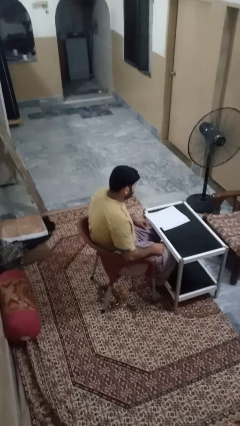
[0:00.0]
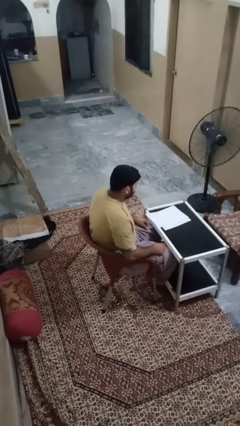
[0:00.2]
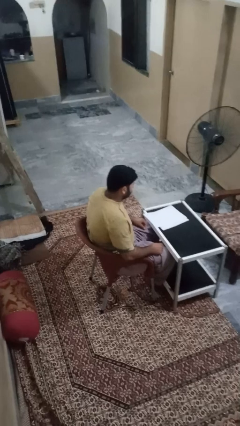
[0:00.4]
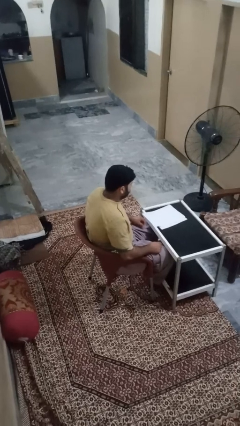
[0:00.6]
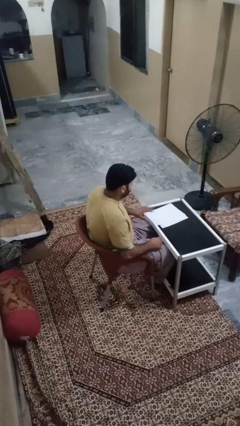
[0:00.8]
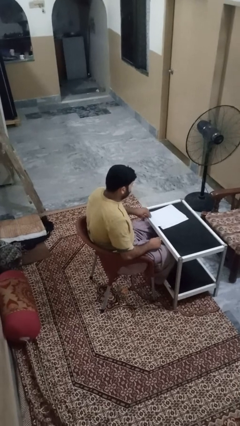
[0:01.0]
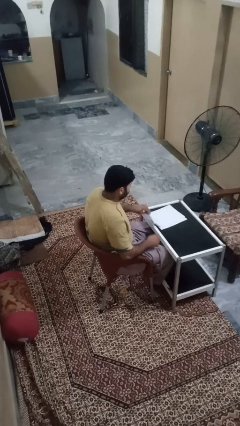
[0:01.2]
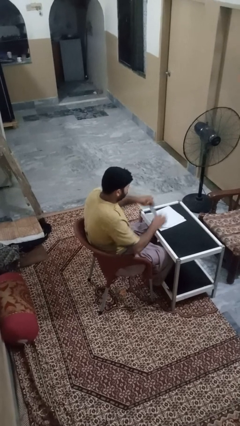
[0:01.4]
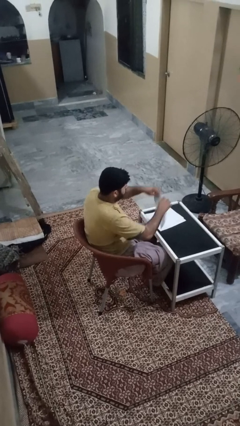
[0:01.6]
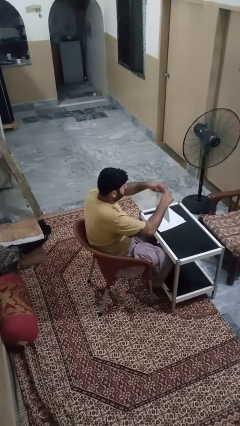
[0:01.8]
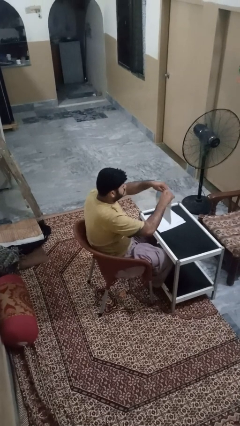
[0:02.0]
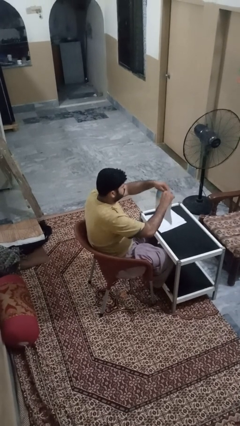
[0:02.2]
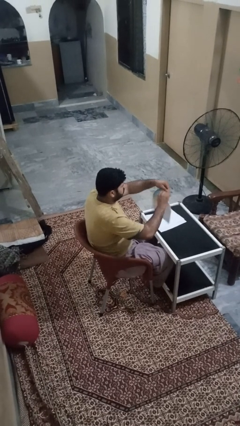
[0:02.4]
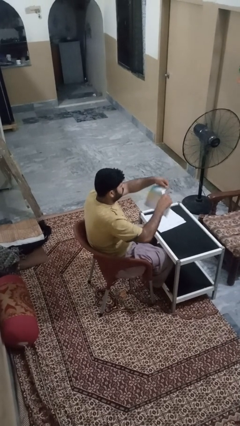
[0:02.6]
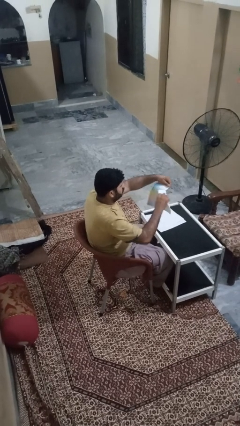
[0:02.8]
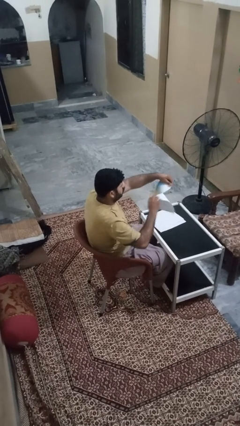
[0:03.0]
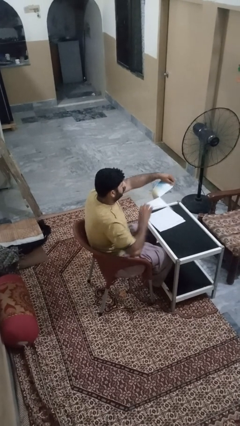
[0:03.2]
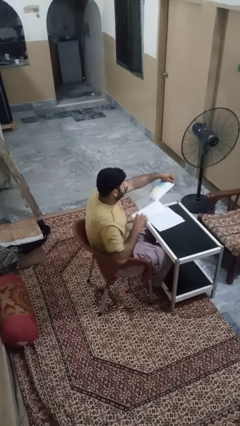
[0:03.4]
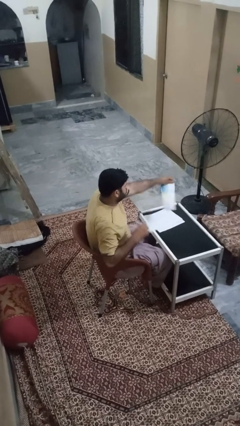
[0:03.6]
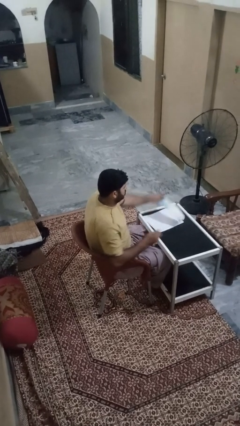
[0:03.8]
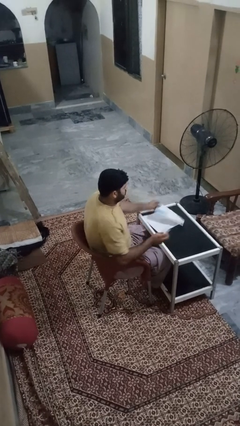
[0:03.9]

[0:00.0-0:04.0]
person tears paper

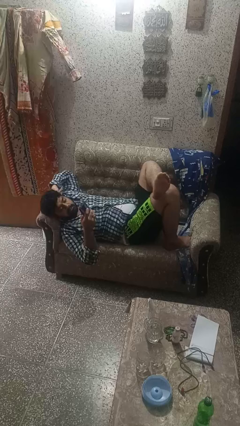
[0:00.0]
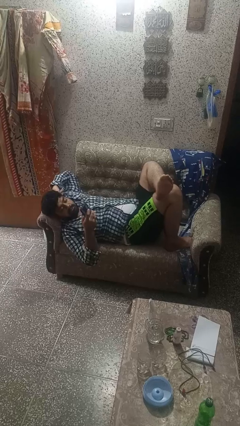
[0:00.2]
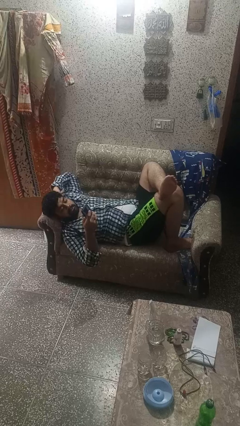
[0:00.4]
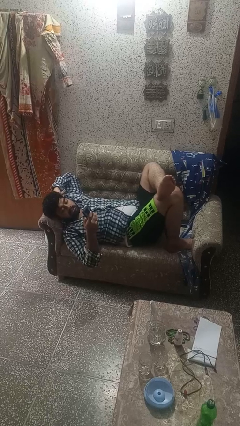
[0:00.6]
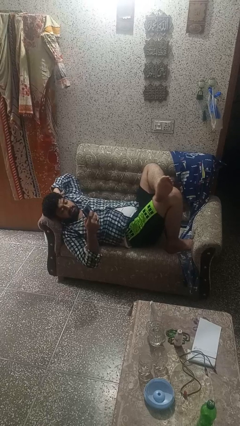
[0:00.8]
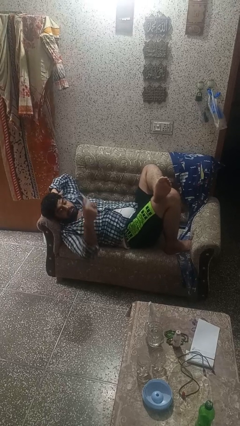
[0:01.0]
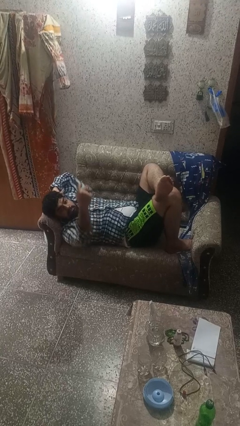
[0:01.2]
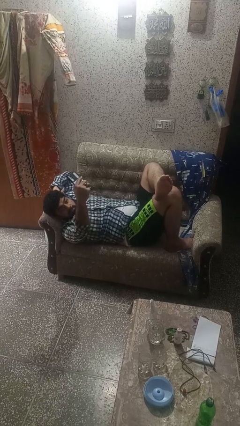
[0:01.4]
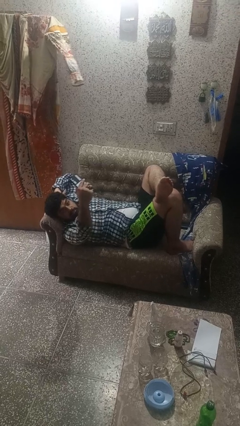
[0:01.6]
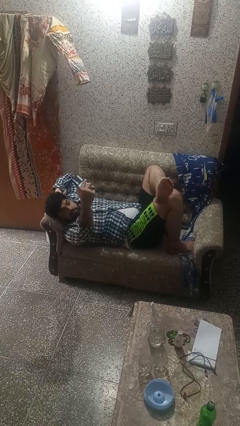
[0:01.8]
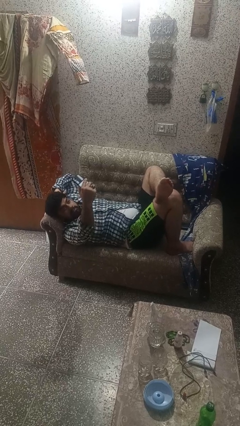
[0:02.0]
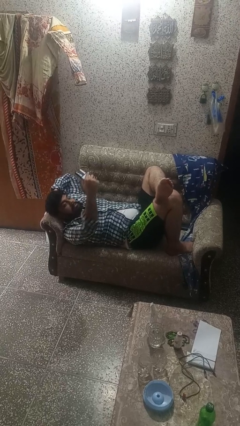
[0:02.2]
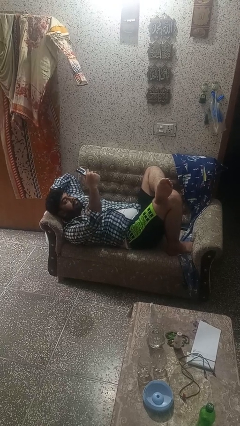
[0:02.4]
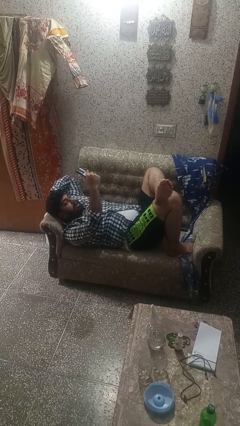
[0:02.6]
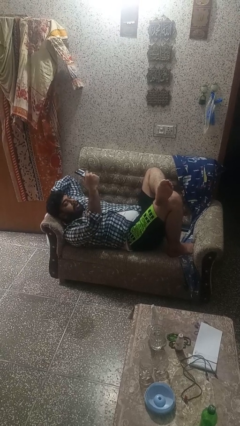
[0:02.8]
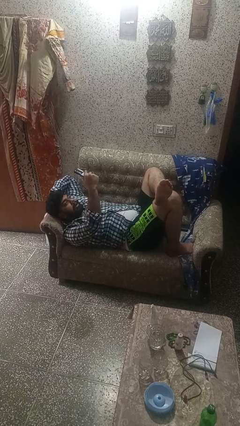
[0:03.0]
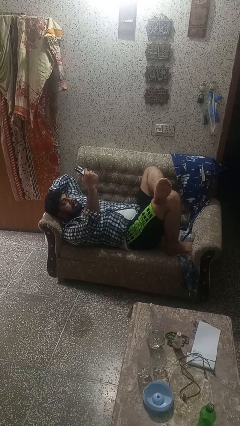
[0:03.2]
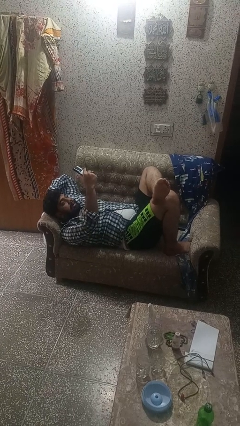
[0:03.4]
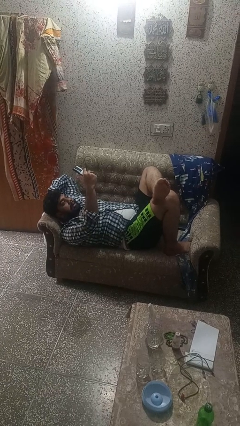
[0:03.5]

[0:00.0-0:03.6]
person takes selfie

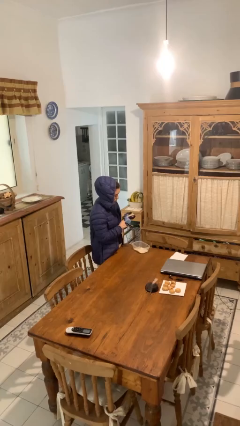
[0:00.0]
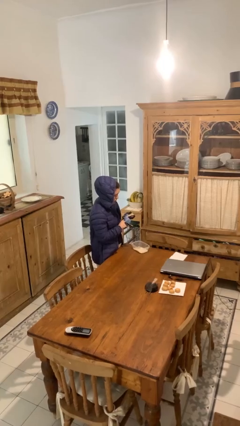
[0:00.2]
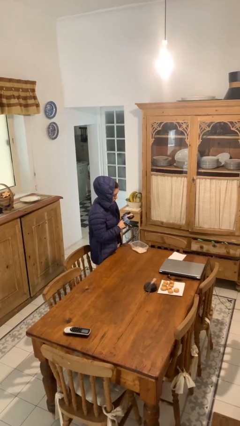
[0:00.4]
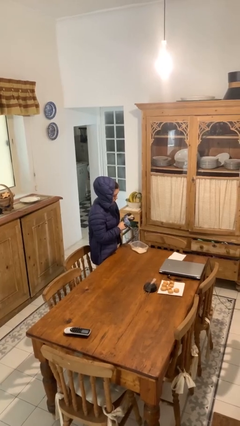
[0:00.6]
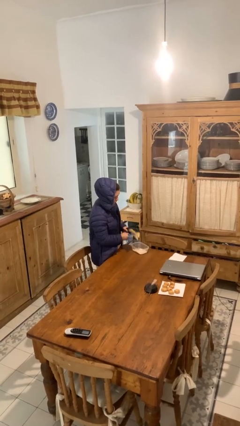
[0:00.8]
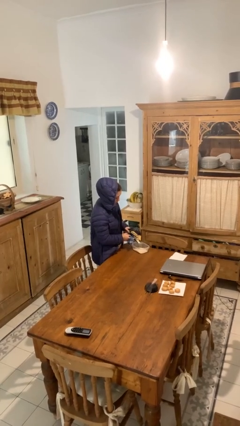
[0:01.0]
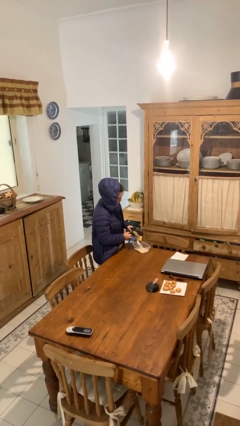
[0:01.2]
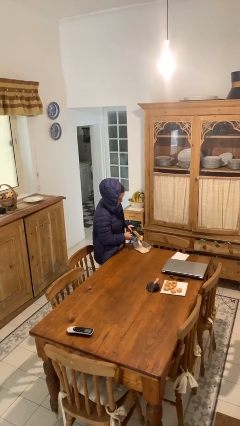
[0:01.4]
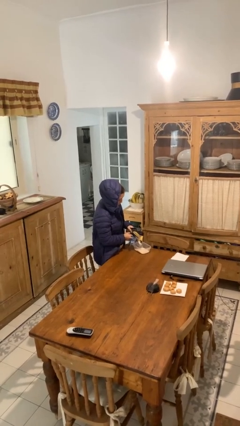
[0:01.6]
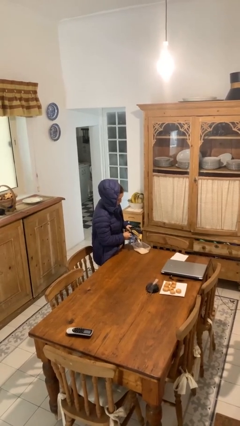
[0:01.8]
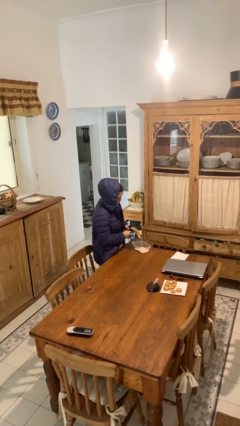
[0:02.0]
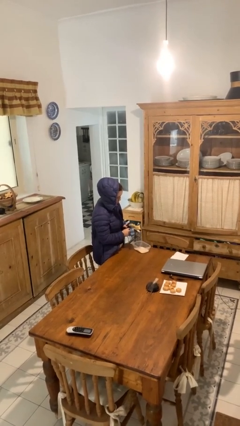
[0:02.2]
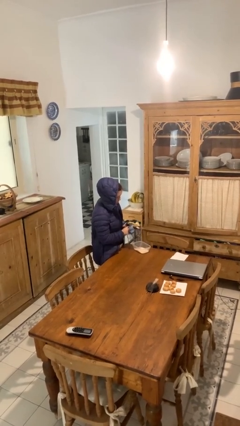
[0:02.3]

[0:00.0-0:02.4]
person pours into bowl

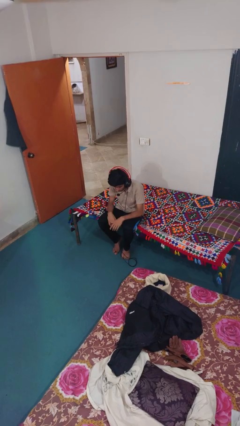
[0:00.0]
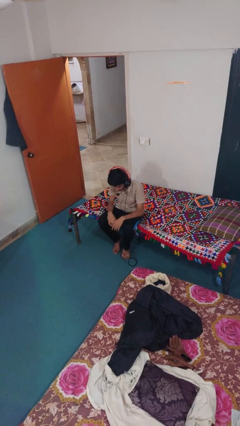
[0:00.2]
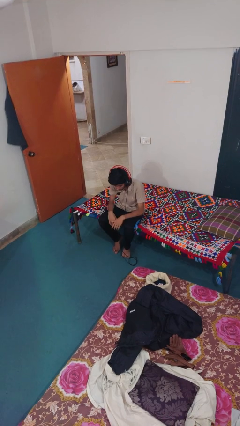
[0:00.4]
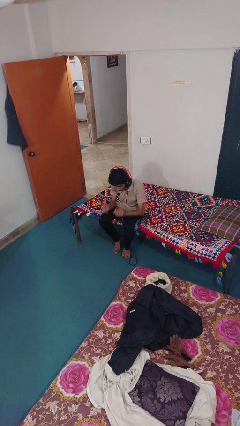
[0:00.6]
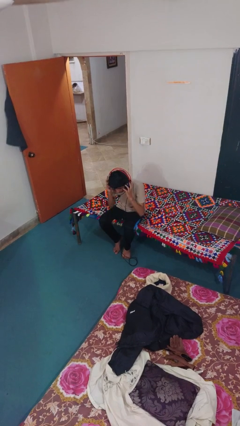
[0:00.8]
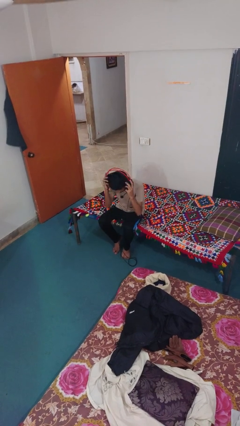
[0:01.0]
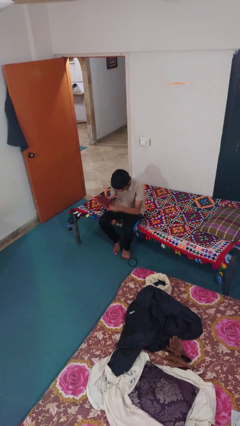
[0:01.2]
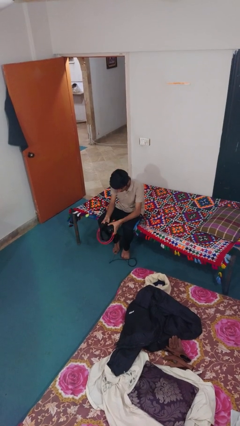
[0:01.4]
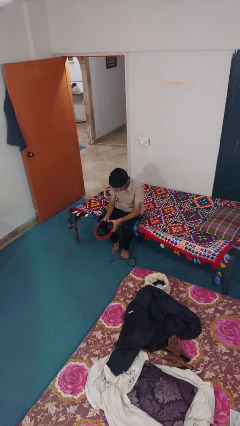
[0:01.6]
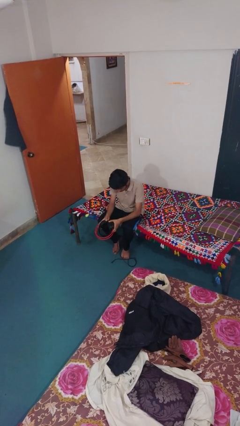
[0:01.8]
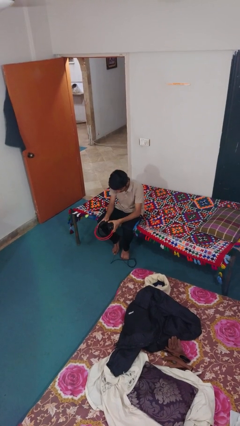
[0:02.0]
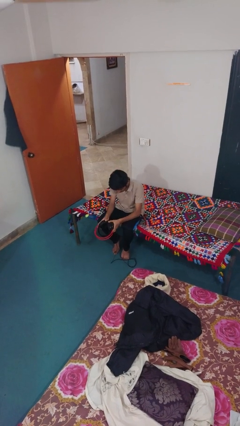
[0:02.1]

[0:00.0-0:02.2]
person takes off headphones

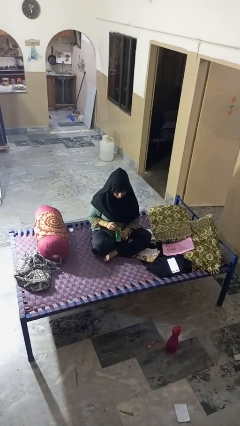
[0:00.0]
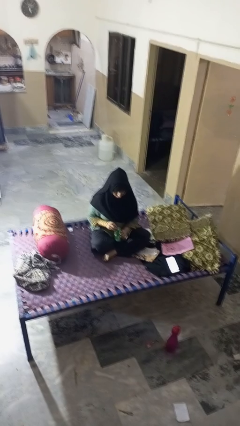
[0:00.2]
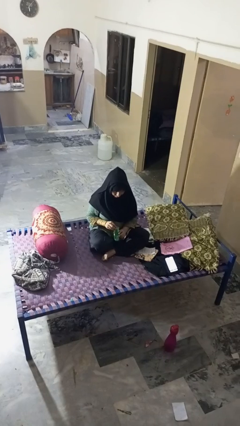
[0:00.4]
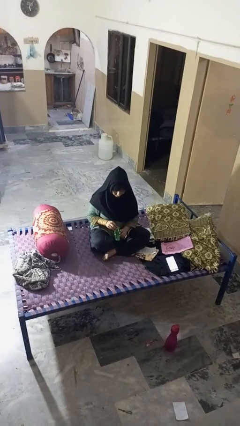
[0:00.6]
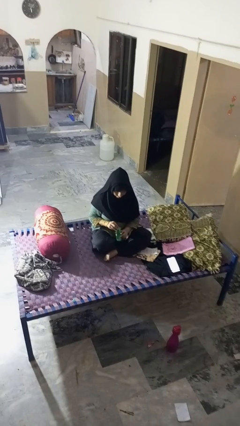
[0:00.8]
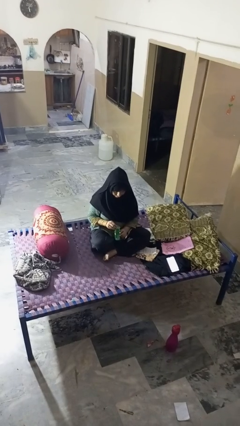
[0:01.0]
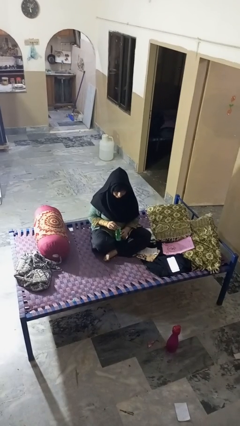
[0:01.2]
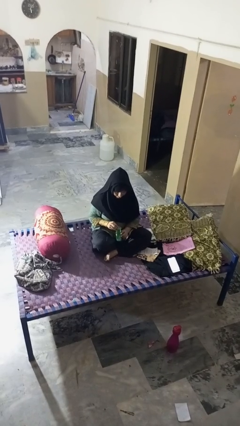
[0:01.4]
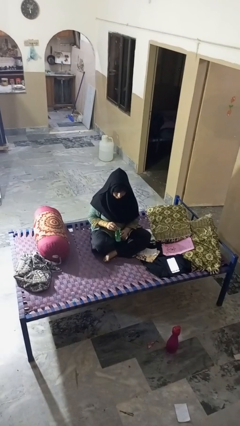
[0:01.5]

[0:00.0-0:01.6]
person opens can with can opener

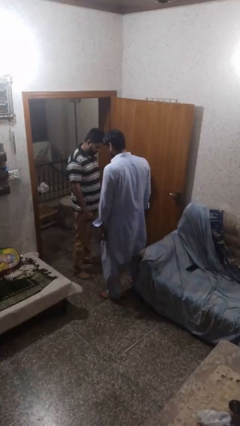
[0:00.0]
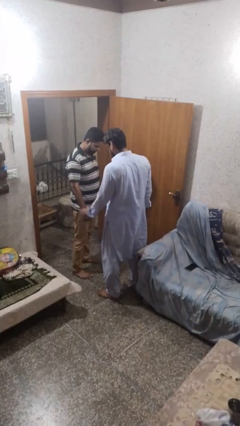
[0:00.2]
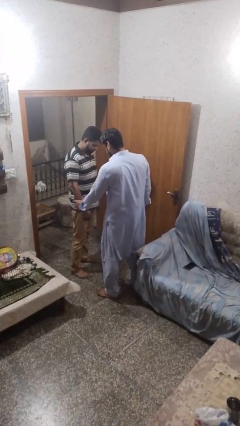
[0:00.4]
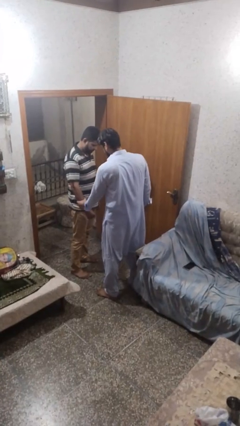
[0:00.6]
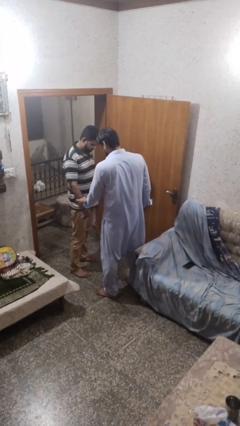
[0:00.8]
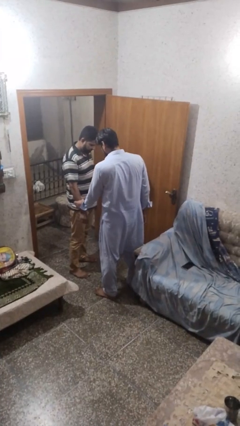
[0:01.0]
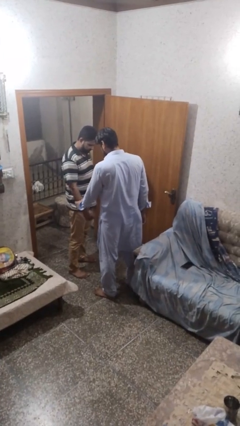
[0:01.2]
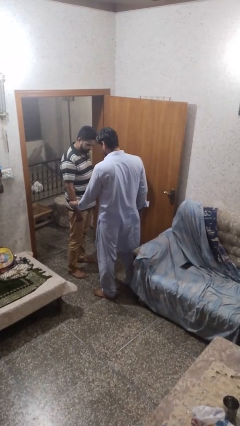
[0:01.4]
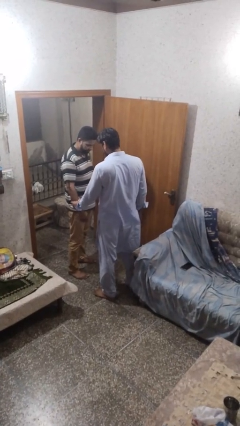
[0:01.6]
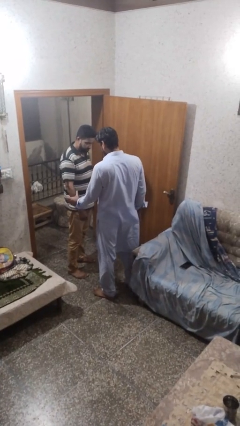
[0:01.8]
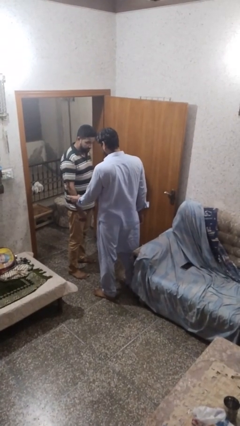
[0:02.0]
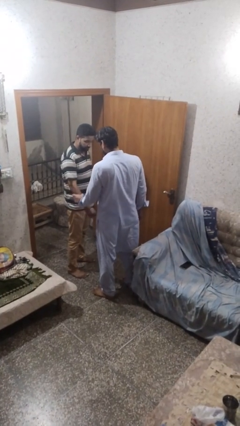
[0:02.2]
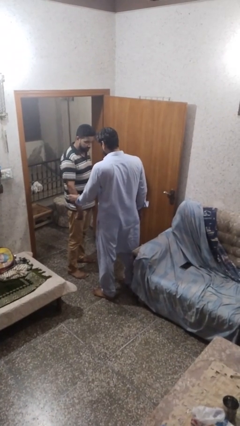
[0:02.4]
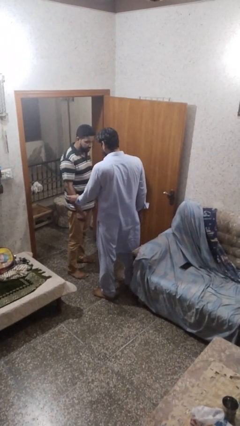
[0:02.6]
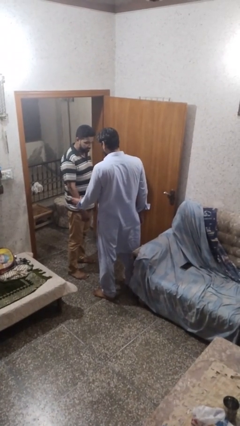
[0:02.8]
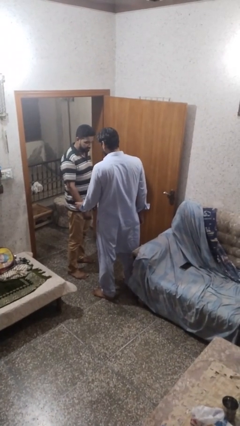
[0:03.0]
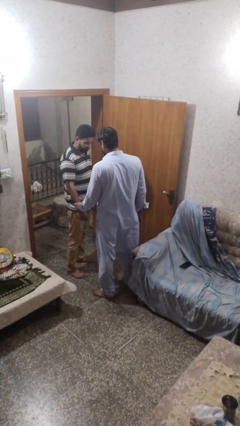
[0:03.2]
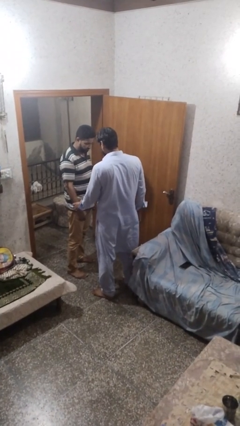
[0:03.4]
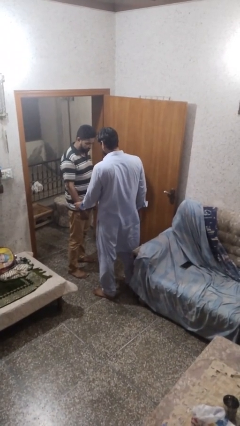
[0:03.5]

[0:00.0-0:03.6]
person grabs person by forearm

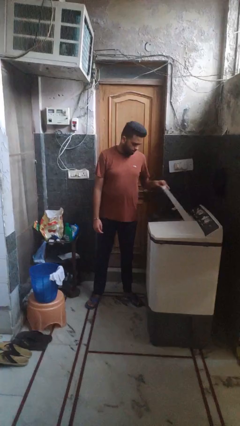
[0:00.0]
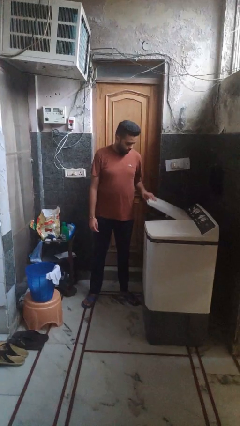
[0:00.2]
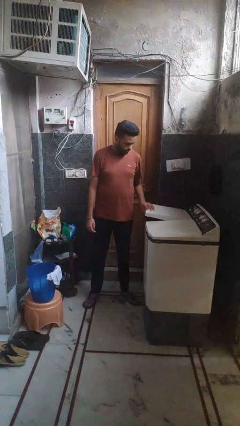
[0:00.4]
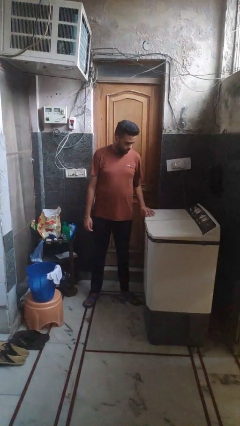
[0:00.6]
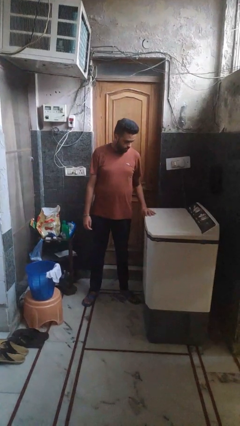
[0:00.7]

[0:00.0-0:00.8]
person closes clothes washer
